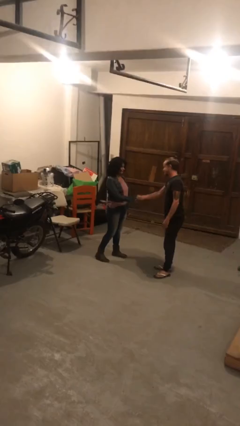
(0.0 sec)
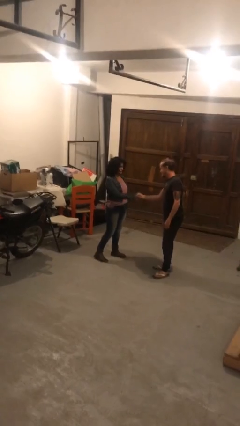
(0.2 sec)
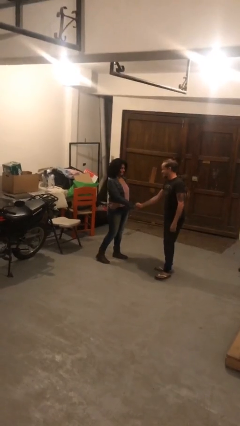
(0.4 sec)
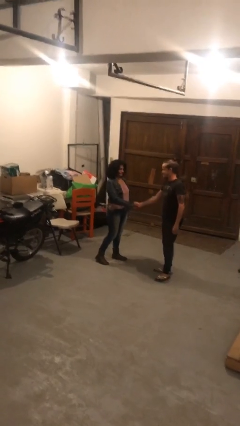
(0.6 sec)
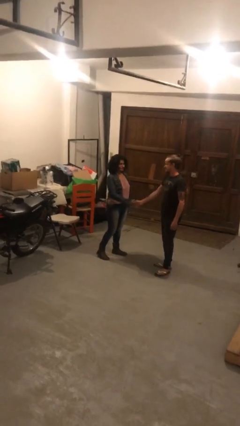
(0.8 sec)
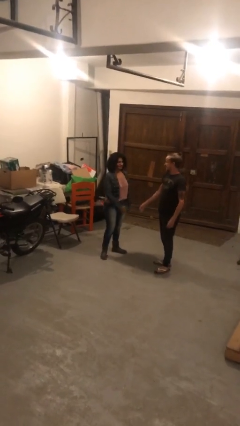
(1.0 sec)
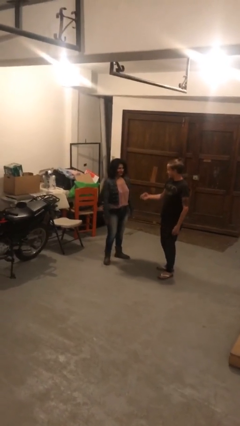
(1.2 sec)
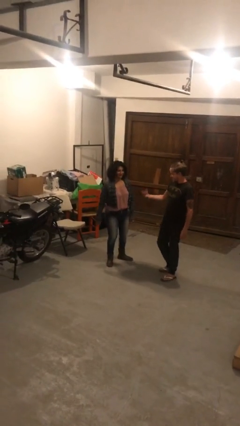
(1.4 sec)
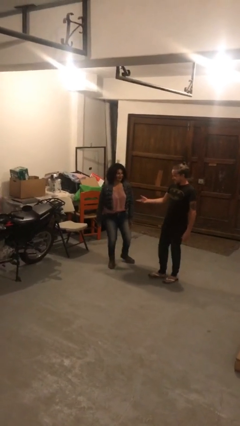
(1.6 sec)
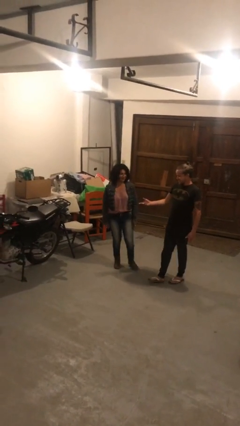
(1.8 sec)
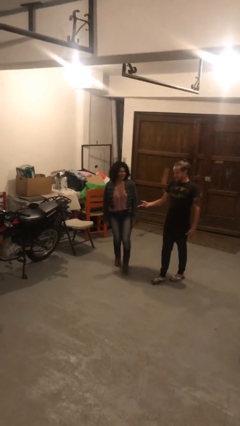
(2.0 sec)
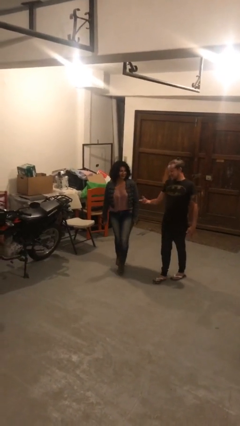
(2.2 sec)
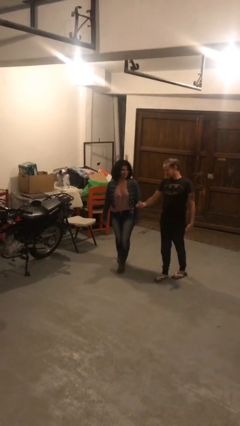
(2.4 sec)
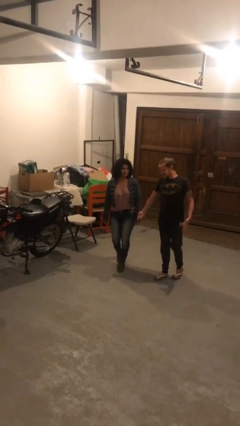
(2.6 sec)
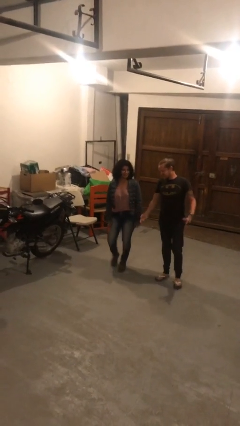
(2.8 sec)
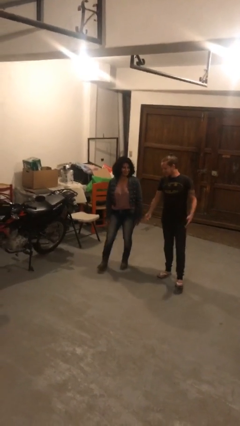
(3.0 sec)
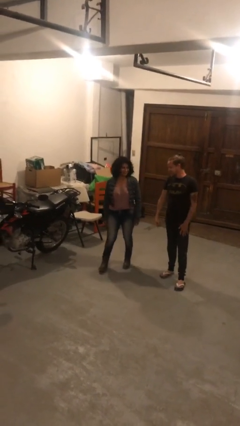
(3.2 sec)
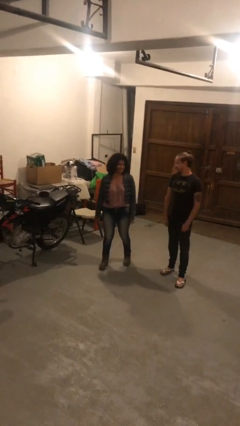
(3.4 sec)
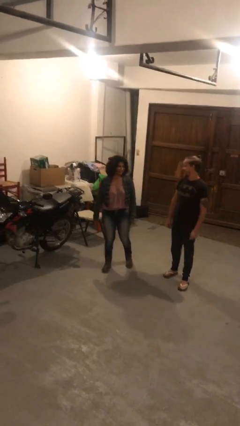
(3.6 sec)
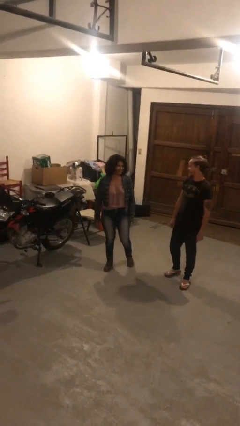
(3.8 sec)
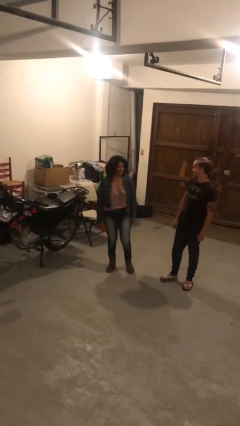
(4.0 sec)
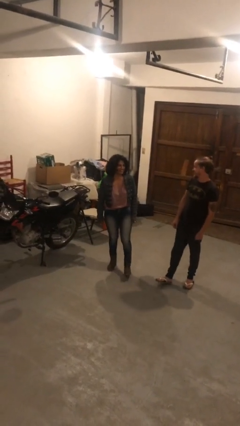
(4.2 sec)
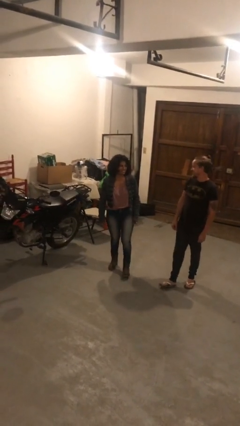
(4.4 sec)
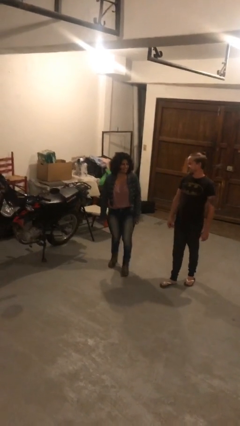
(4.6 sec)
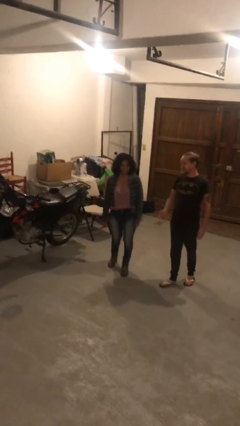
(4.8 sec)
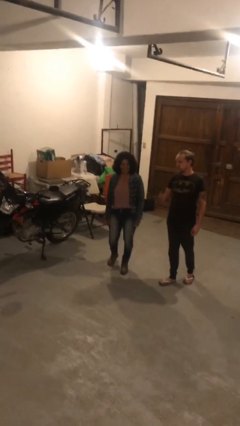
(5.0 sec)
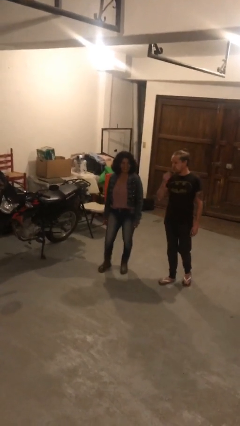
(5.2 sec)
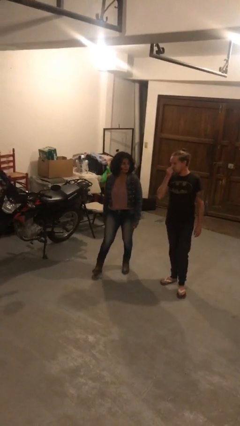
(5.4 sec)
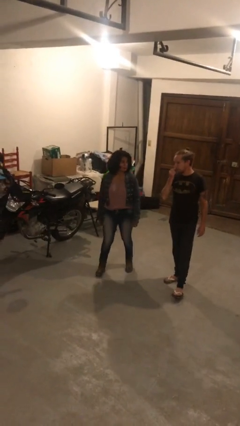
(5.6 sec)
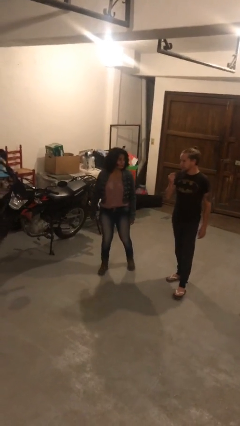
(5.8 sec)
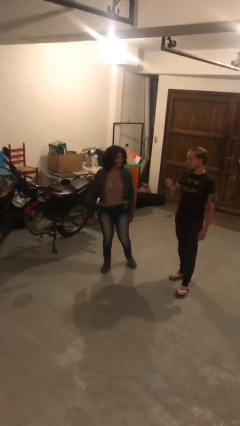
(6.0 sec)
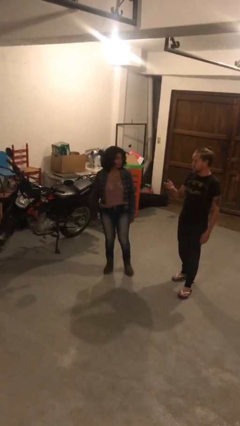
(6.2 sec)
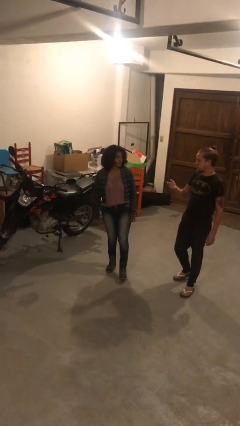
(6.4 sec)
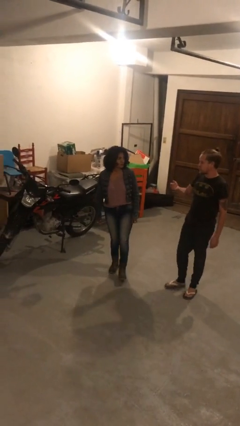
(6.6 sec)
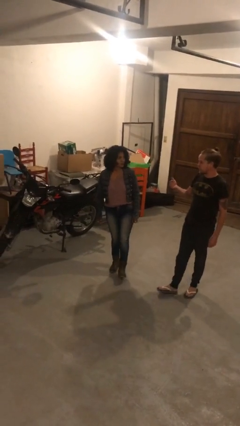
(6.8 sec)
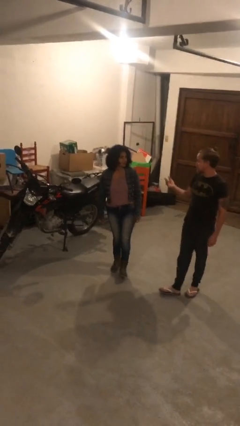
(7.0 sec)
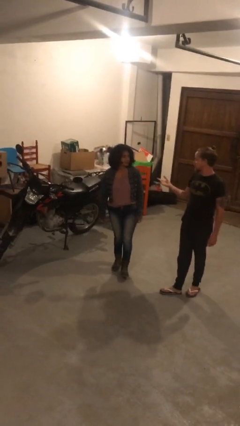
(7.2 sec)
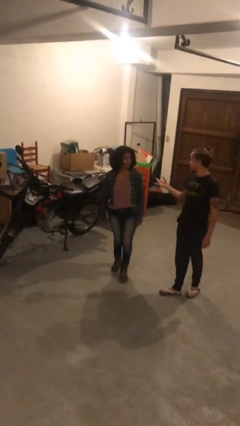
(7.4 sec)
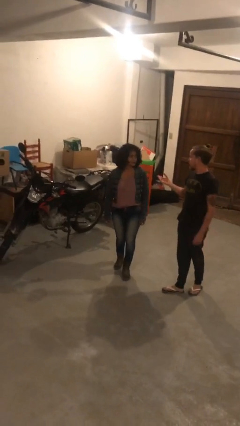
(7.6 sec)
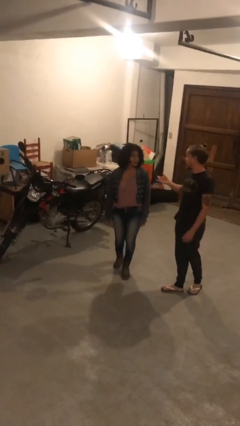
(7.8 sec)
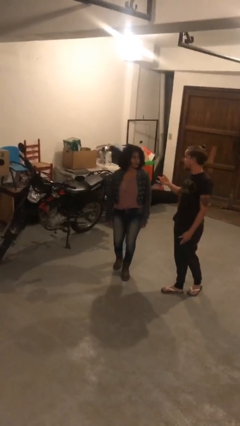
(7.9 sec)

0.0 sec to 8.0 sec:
person talks to person

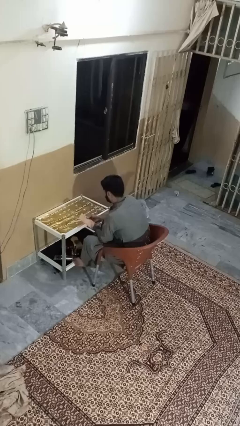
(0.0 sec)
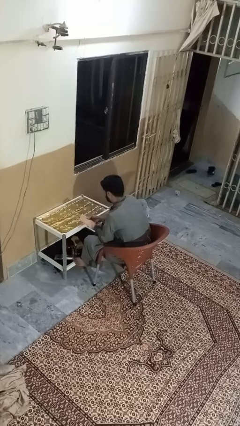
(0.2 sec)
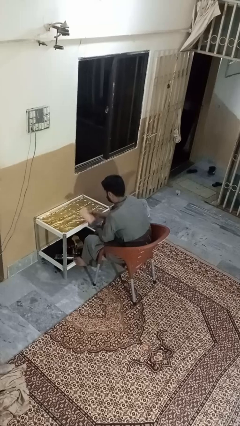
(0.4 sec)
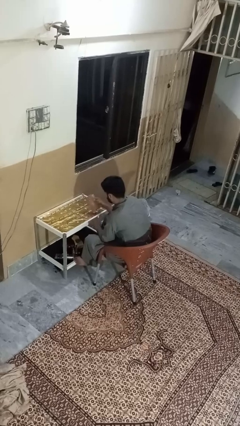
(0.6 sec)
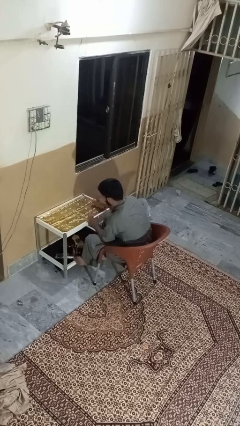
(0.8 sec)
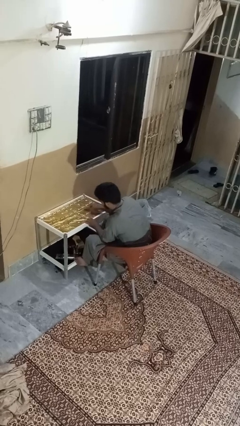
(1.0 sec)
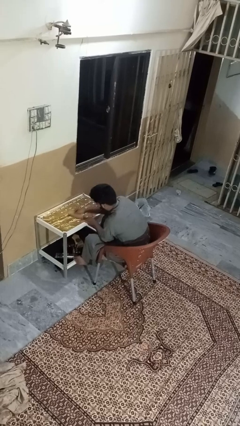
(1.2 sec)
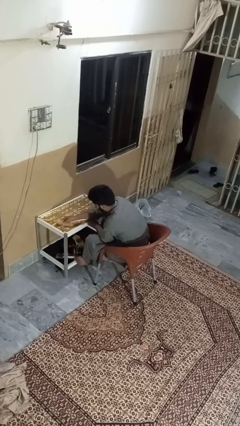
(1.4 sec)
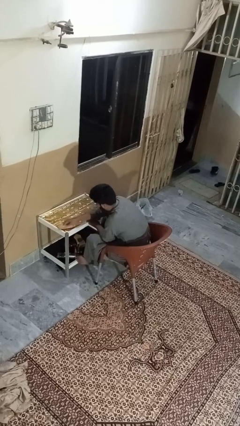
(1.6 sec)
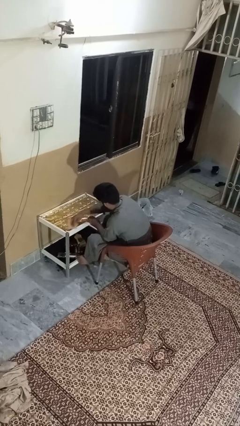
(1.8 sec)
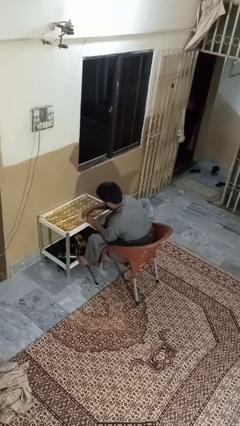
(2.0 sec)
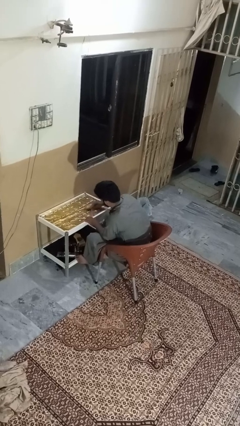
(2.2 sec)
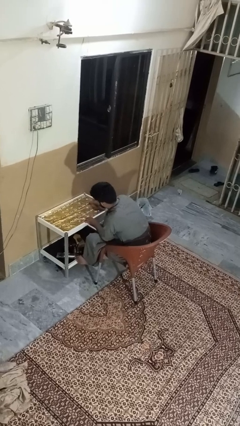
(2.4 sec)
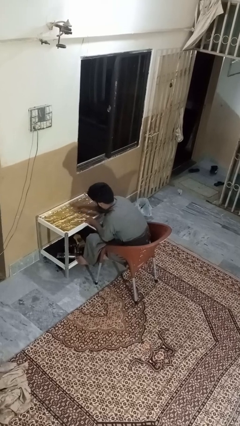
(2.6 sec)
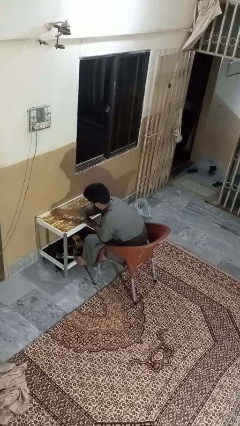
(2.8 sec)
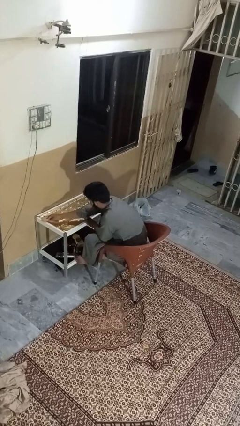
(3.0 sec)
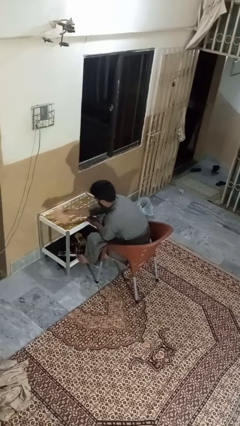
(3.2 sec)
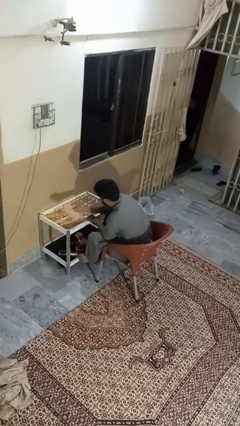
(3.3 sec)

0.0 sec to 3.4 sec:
person cleans table with rag

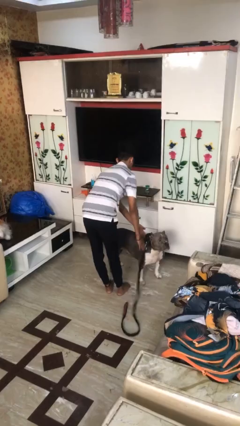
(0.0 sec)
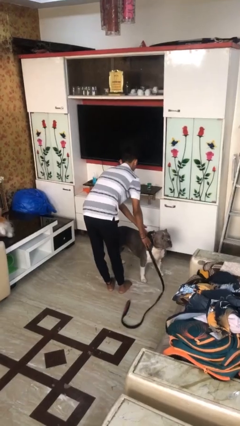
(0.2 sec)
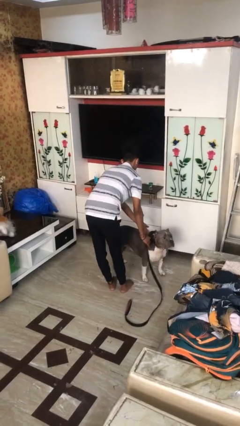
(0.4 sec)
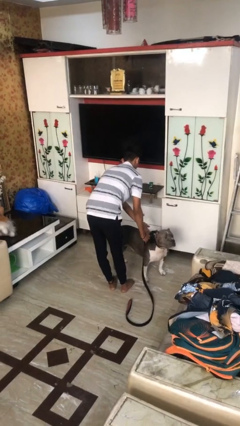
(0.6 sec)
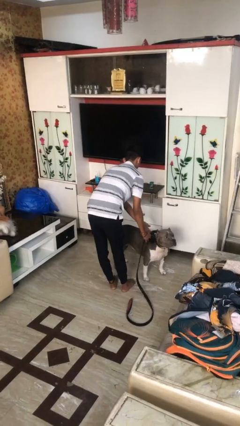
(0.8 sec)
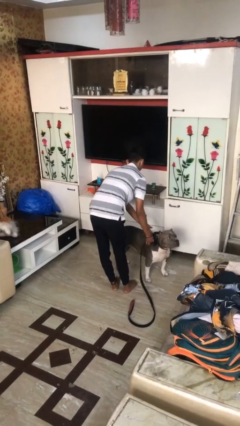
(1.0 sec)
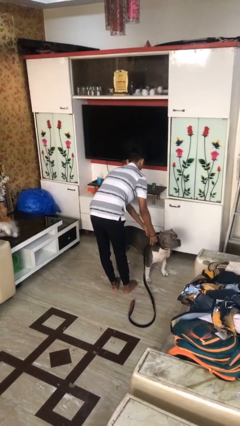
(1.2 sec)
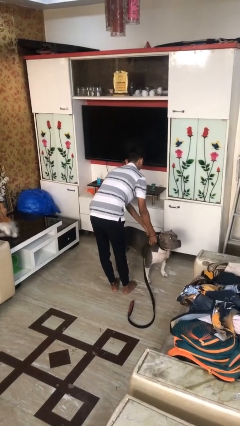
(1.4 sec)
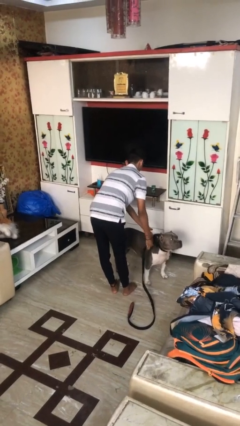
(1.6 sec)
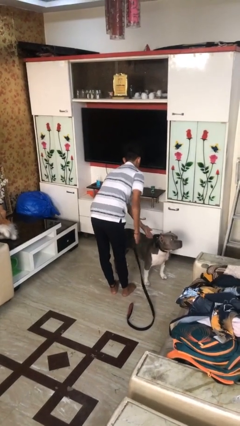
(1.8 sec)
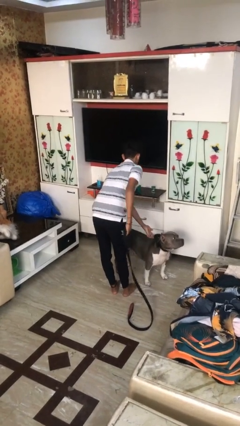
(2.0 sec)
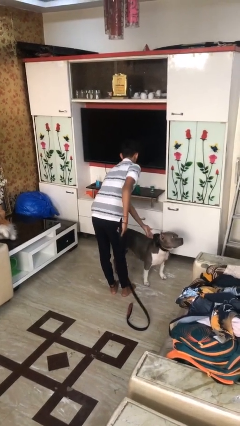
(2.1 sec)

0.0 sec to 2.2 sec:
person unattaches leash from dog

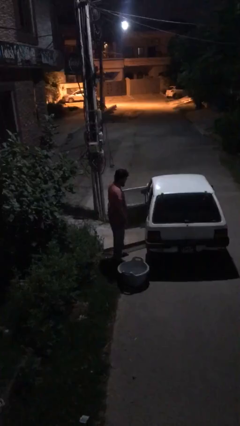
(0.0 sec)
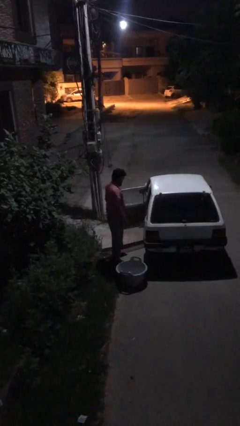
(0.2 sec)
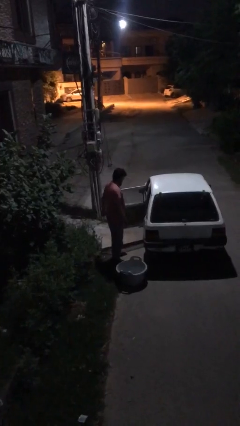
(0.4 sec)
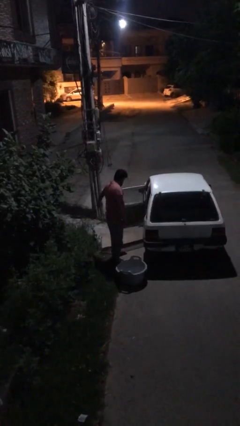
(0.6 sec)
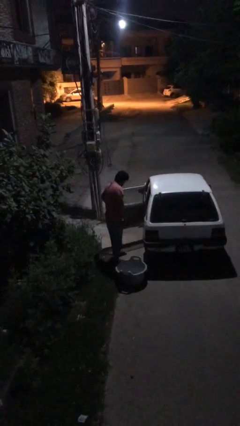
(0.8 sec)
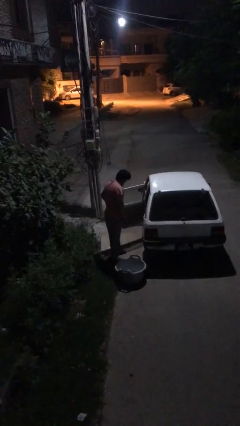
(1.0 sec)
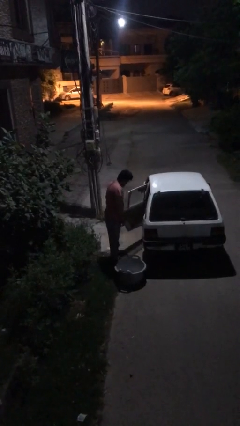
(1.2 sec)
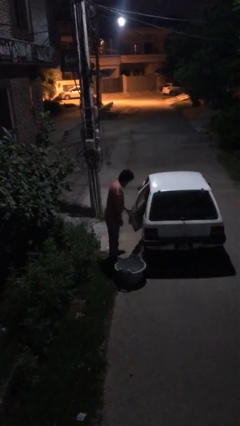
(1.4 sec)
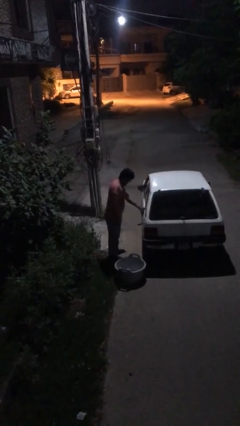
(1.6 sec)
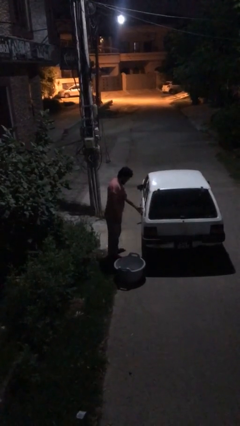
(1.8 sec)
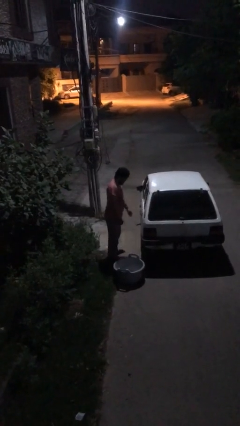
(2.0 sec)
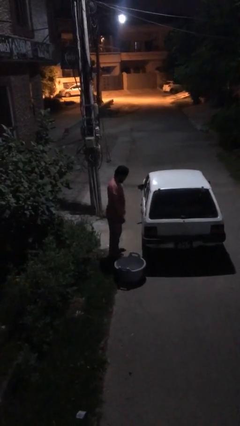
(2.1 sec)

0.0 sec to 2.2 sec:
person closes car door

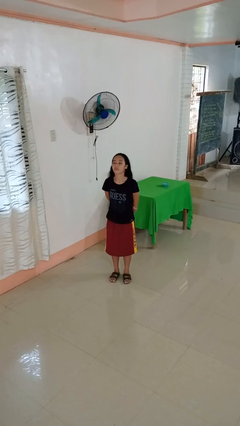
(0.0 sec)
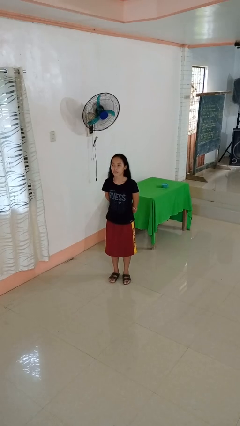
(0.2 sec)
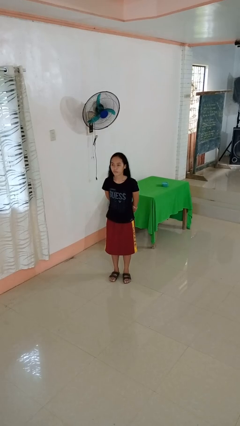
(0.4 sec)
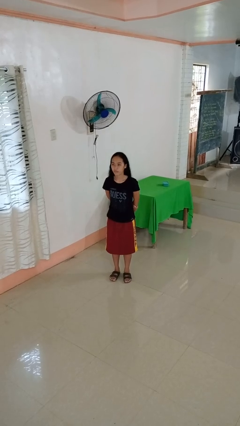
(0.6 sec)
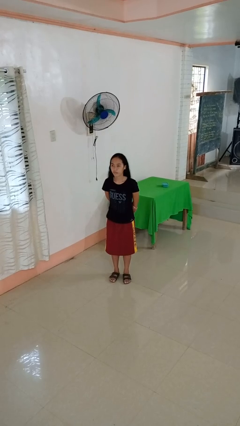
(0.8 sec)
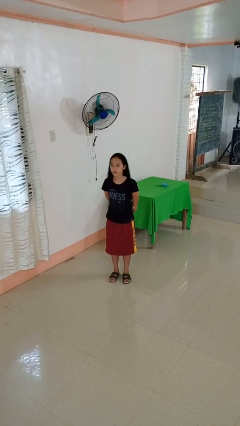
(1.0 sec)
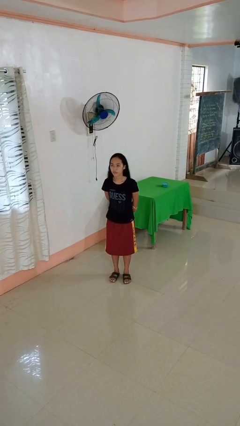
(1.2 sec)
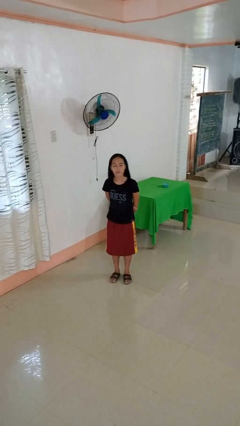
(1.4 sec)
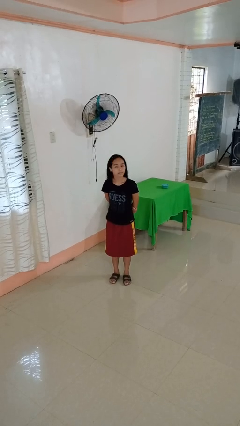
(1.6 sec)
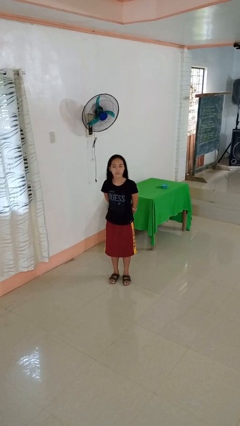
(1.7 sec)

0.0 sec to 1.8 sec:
person nods head
